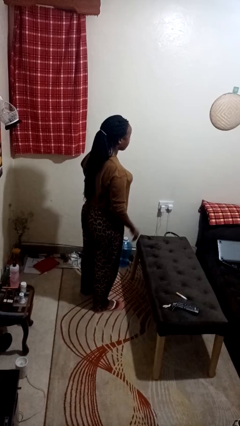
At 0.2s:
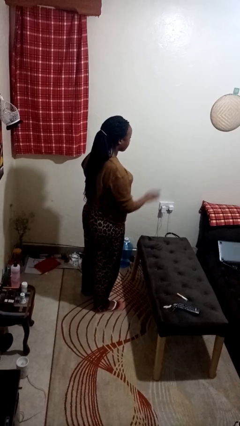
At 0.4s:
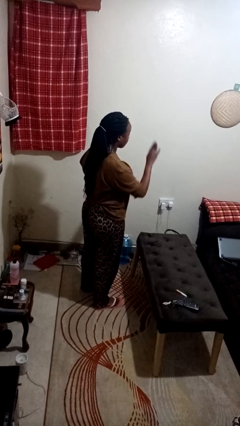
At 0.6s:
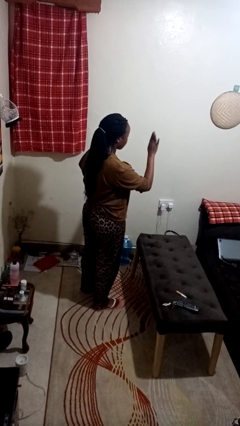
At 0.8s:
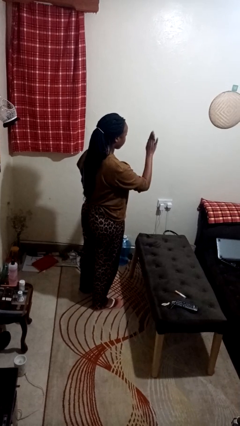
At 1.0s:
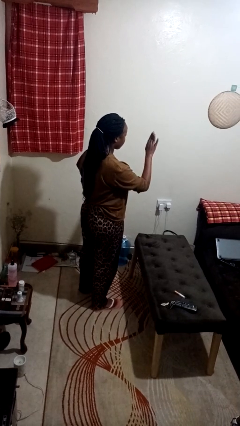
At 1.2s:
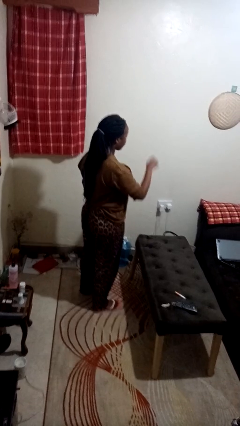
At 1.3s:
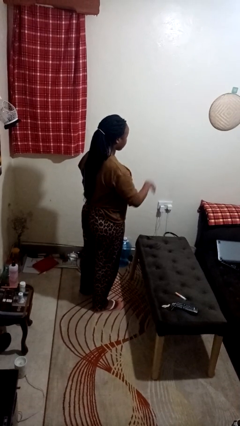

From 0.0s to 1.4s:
person gestures stop

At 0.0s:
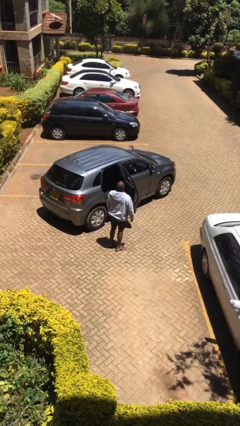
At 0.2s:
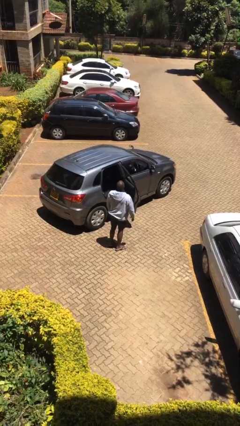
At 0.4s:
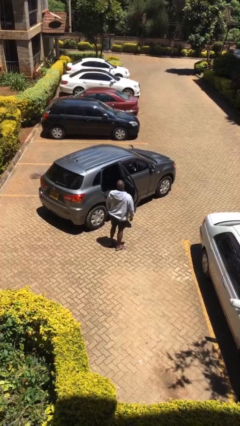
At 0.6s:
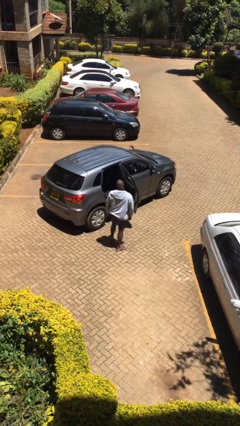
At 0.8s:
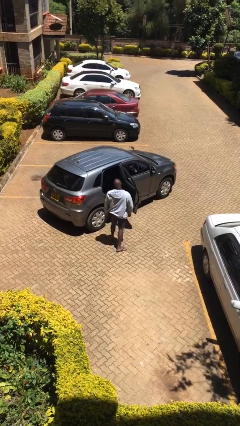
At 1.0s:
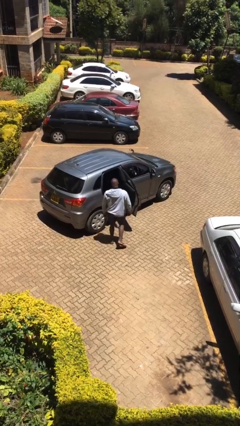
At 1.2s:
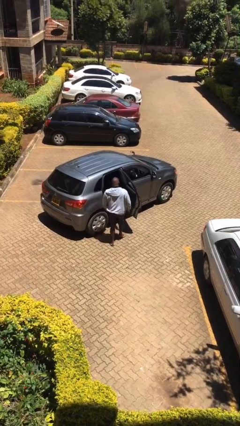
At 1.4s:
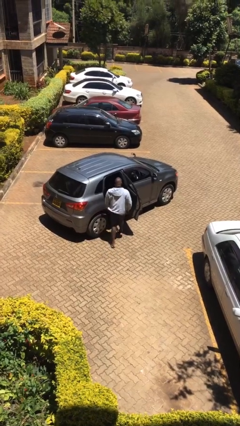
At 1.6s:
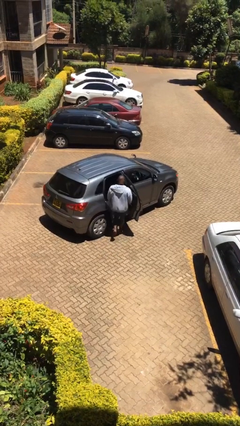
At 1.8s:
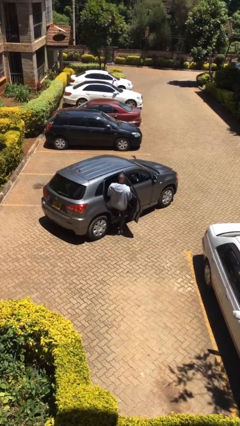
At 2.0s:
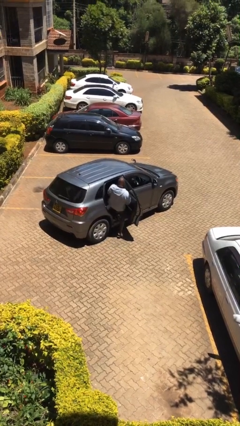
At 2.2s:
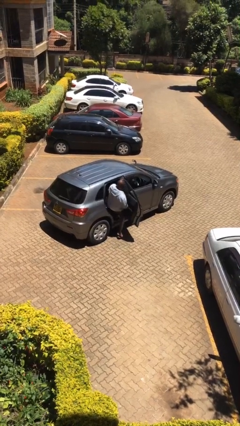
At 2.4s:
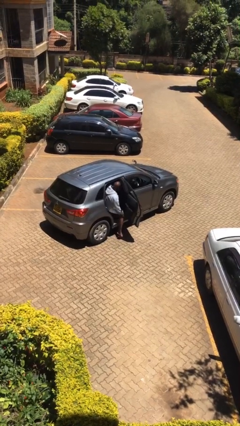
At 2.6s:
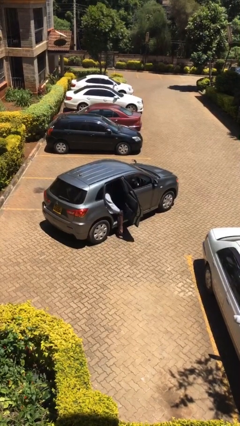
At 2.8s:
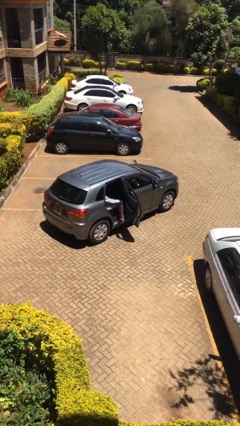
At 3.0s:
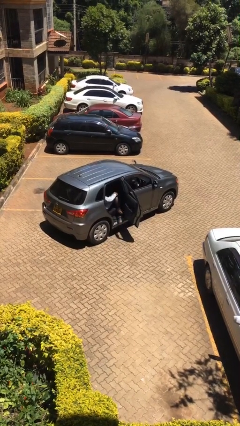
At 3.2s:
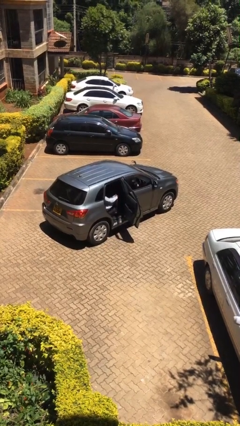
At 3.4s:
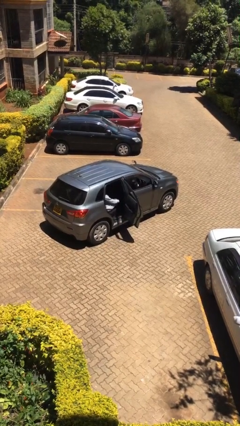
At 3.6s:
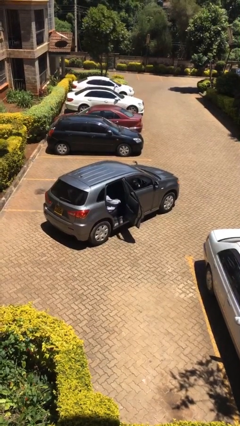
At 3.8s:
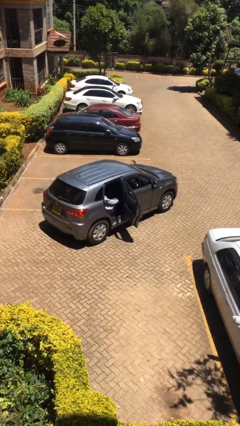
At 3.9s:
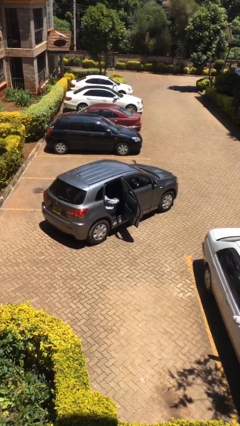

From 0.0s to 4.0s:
person enters car

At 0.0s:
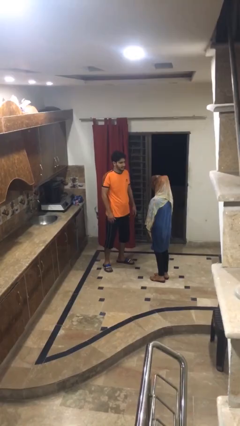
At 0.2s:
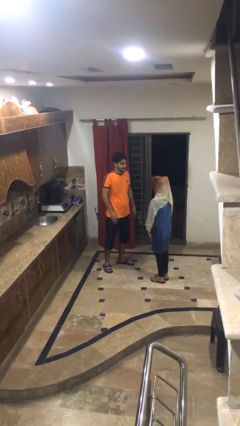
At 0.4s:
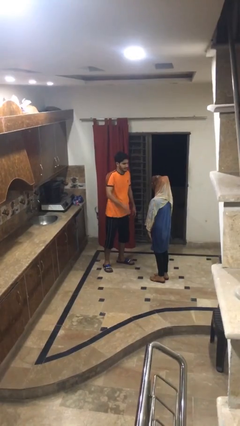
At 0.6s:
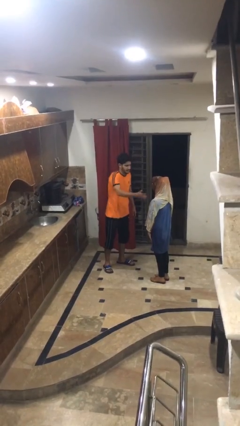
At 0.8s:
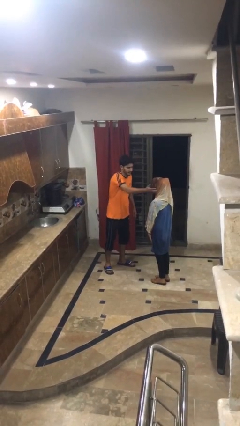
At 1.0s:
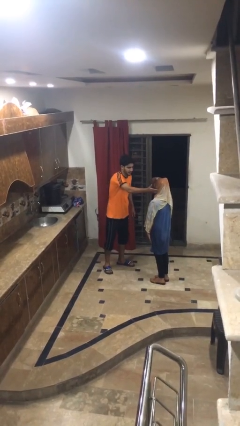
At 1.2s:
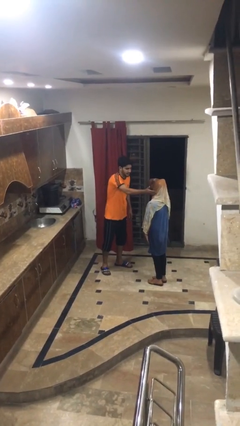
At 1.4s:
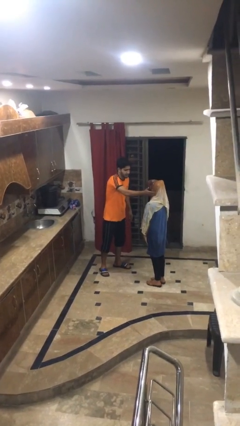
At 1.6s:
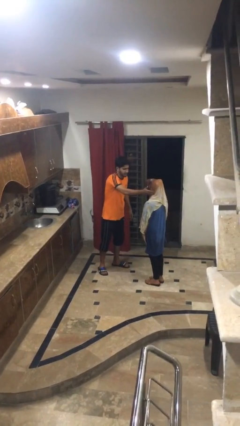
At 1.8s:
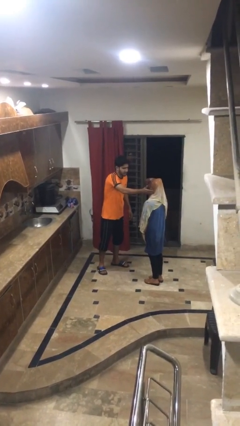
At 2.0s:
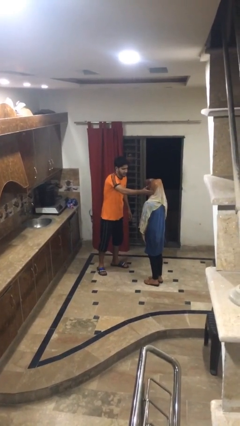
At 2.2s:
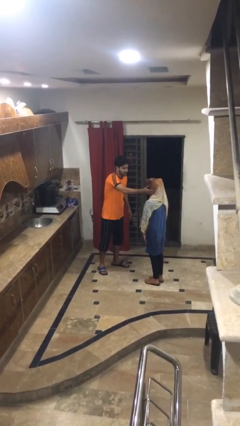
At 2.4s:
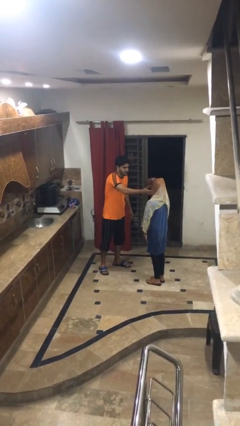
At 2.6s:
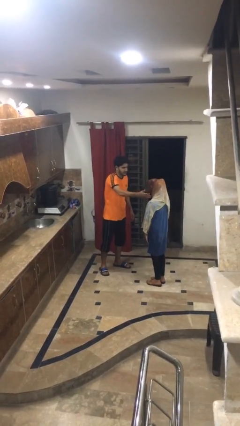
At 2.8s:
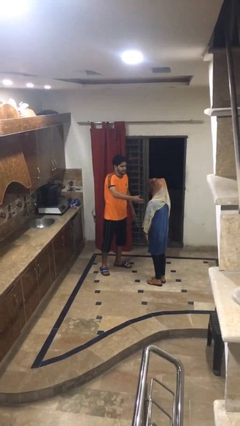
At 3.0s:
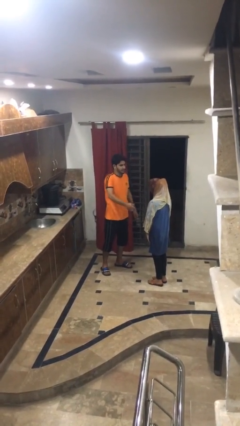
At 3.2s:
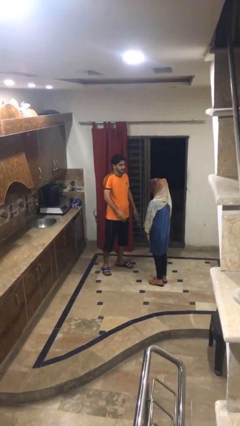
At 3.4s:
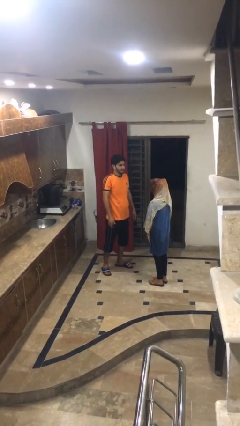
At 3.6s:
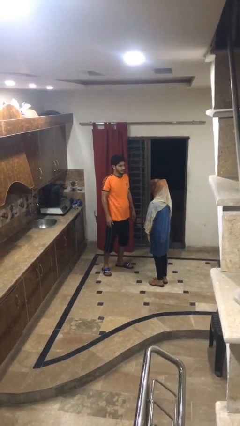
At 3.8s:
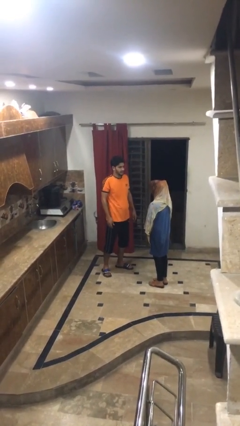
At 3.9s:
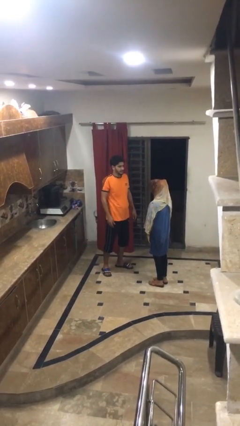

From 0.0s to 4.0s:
person touches face of person

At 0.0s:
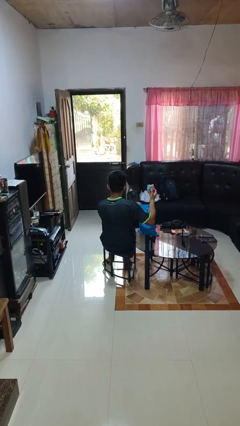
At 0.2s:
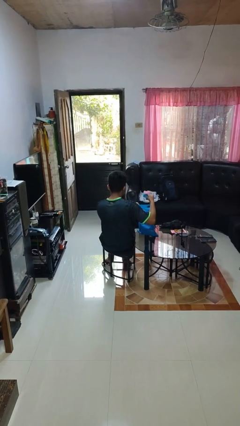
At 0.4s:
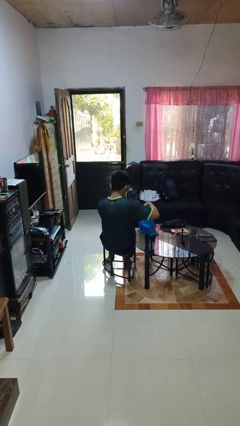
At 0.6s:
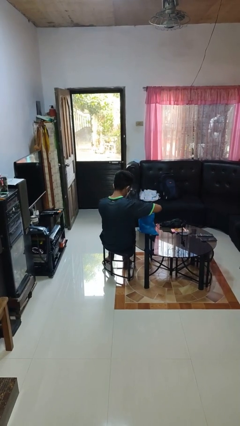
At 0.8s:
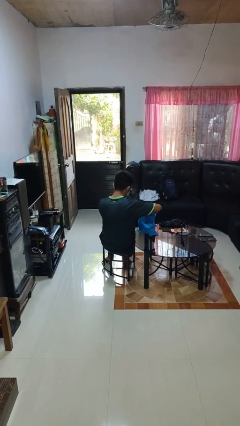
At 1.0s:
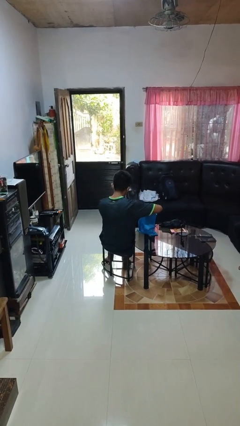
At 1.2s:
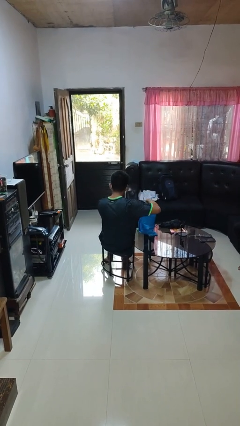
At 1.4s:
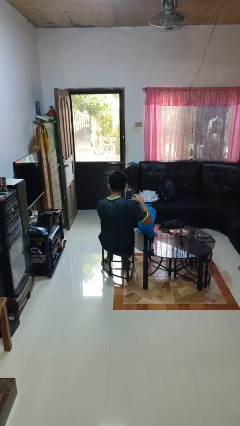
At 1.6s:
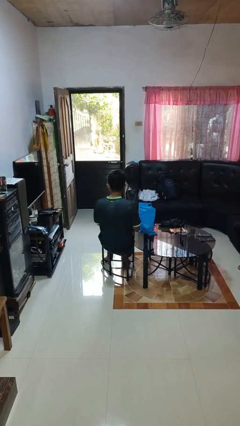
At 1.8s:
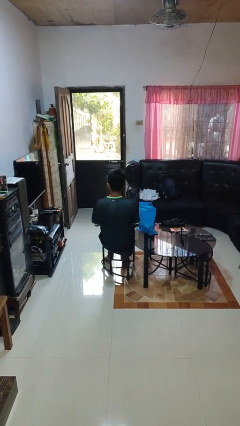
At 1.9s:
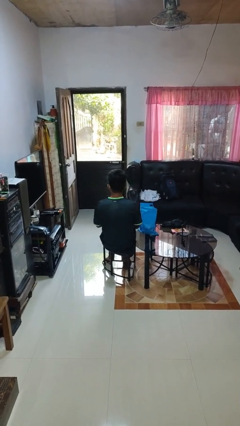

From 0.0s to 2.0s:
person puts object into bag

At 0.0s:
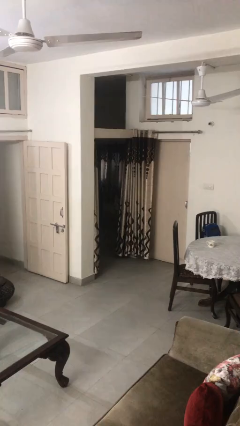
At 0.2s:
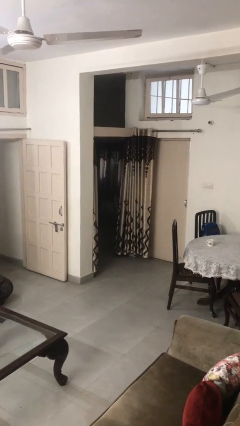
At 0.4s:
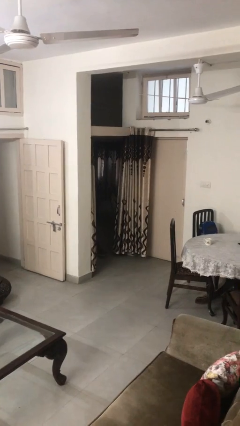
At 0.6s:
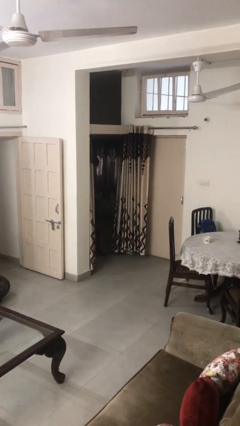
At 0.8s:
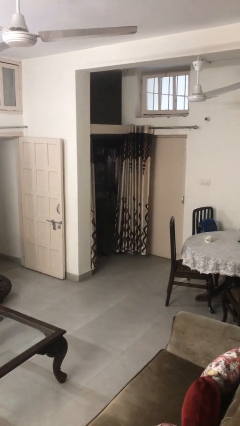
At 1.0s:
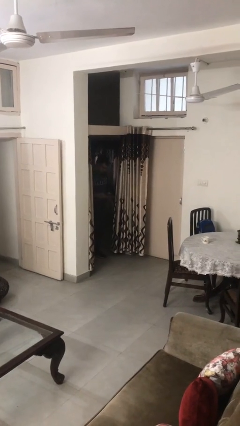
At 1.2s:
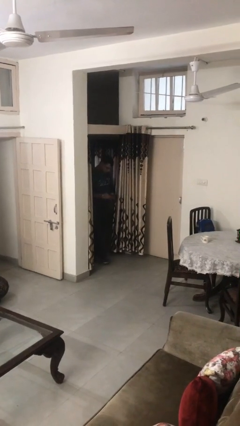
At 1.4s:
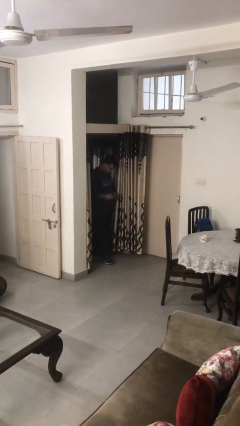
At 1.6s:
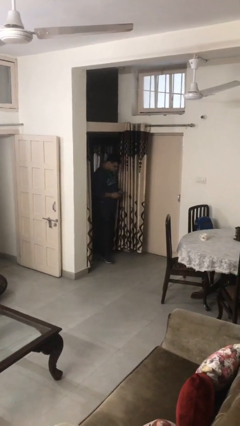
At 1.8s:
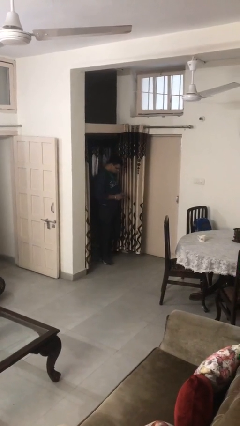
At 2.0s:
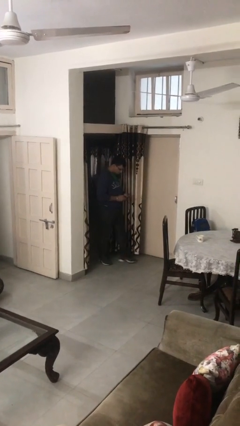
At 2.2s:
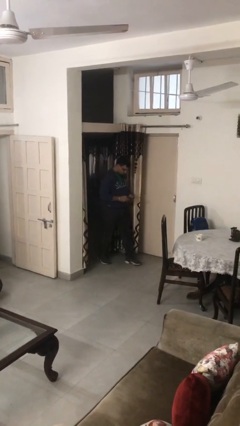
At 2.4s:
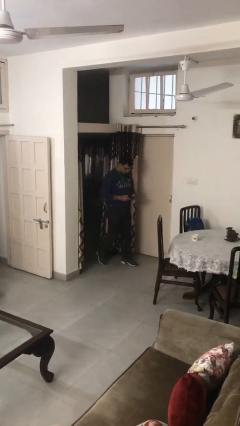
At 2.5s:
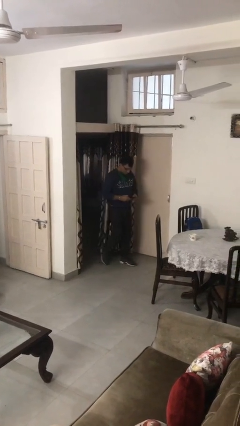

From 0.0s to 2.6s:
person enters scene through structure

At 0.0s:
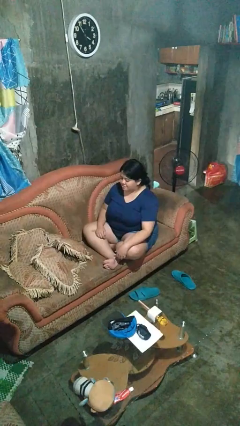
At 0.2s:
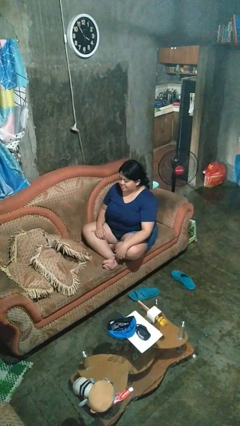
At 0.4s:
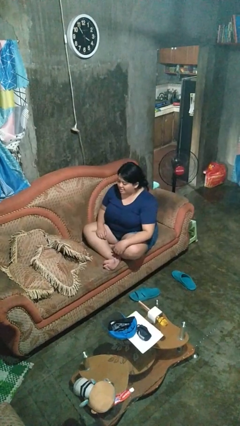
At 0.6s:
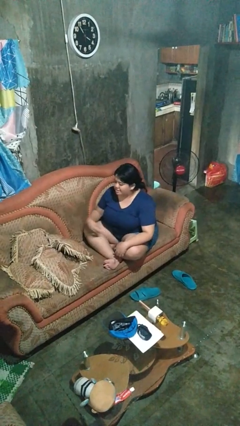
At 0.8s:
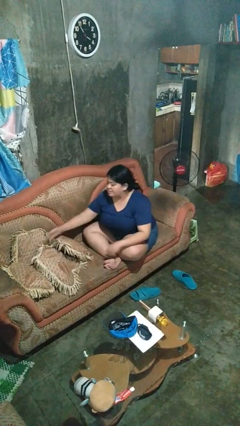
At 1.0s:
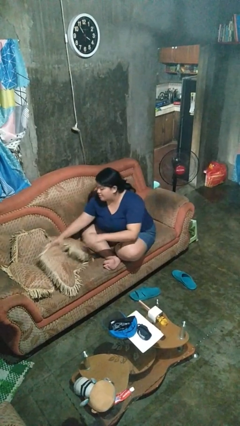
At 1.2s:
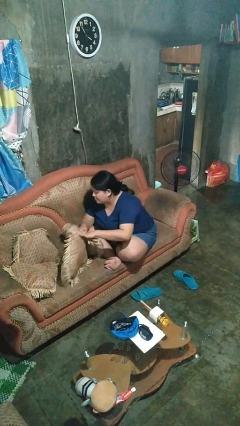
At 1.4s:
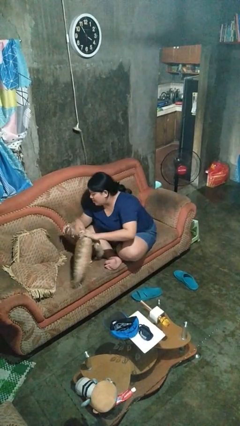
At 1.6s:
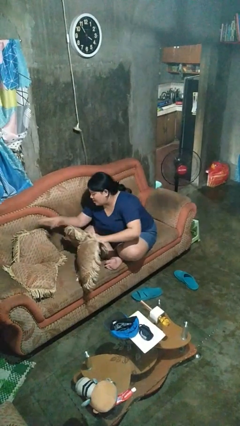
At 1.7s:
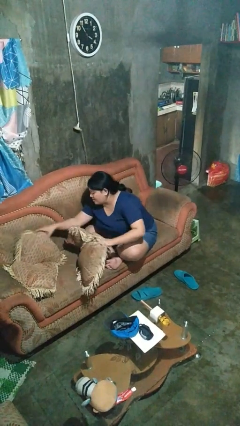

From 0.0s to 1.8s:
person searches in couch

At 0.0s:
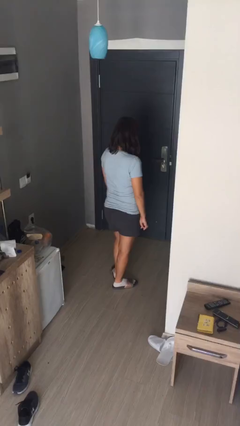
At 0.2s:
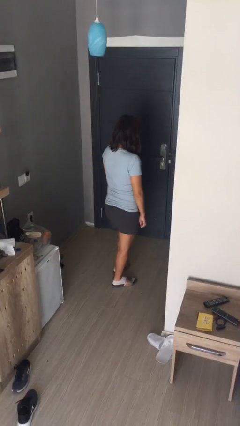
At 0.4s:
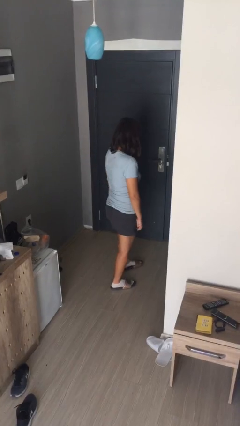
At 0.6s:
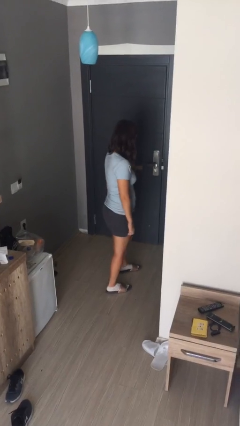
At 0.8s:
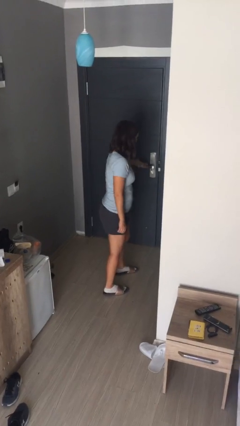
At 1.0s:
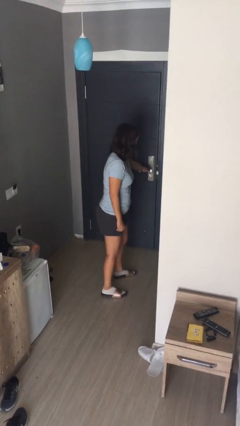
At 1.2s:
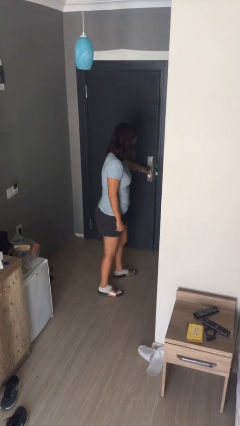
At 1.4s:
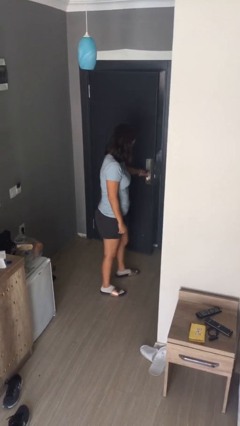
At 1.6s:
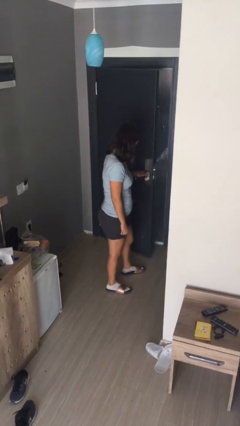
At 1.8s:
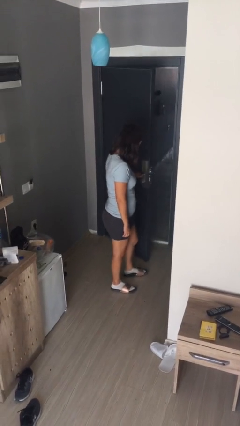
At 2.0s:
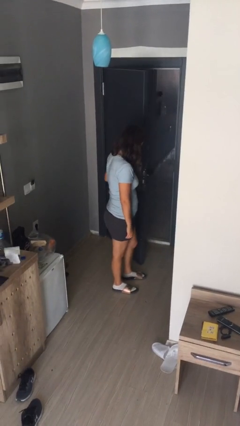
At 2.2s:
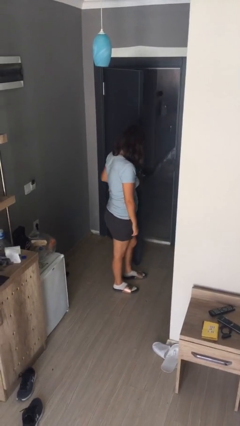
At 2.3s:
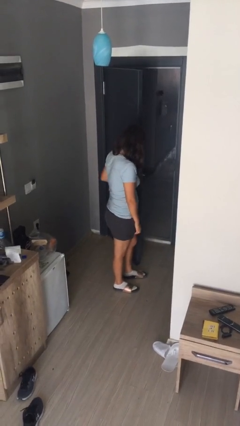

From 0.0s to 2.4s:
person opens facility door
